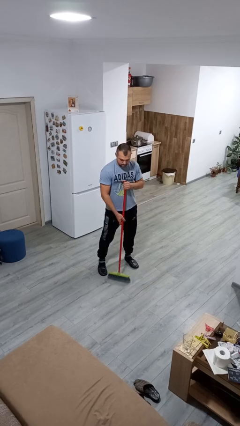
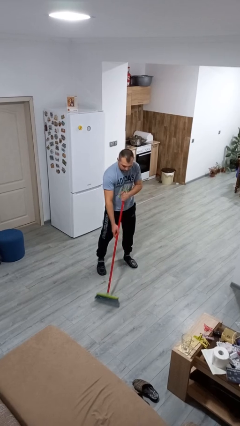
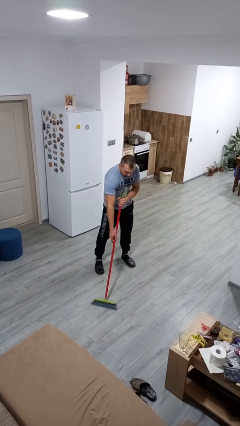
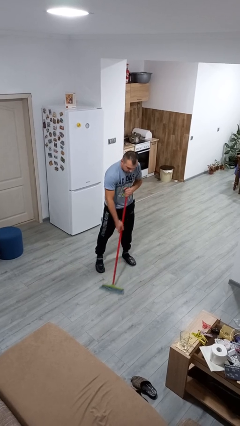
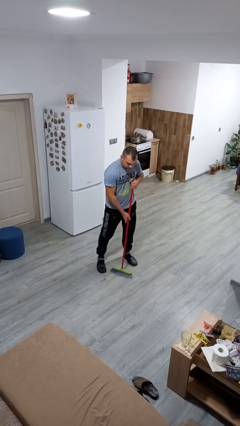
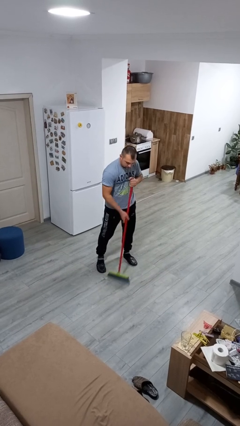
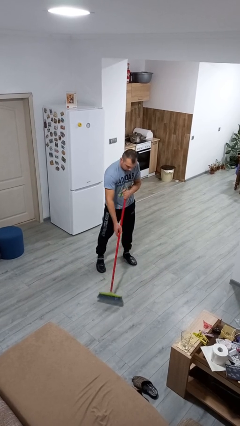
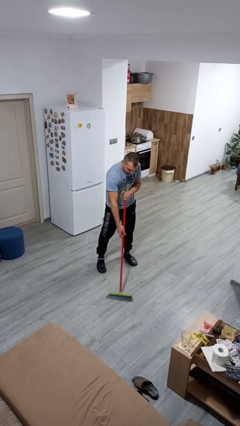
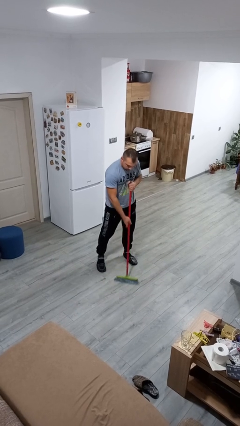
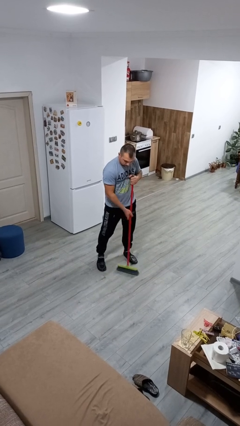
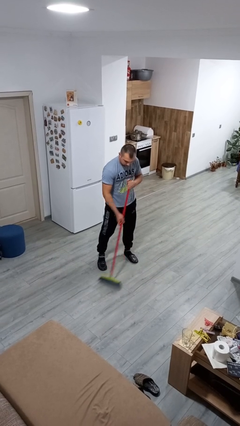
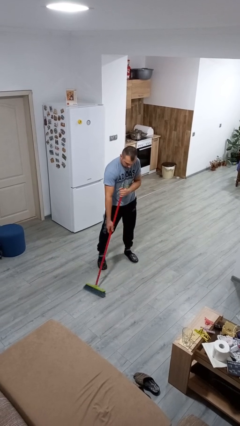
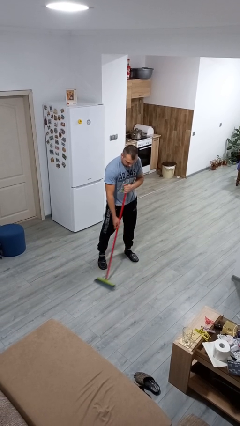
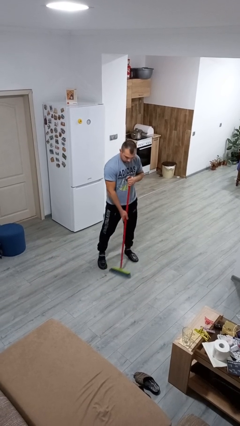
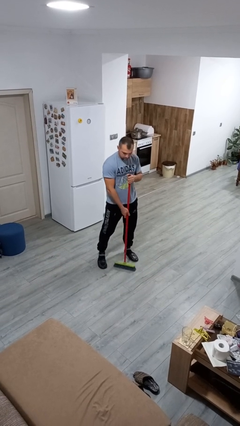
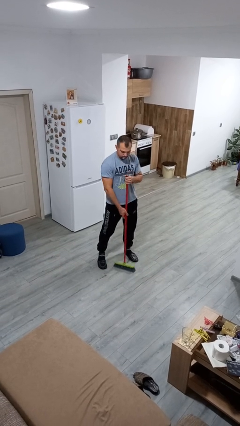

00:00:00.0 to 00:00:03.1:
person sweeps floor

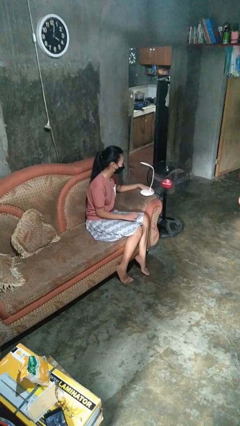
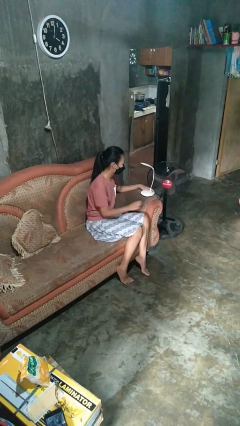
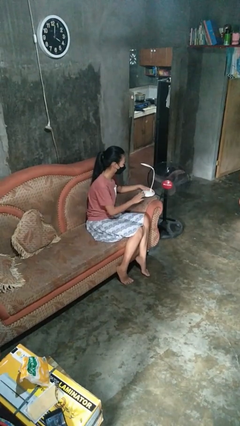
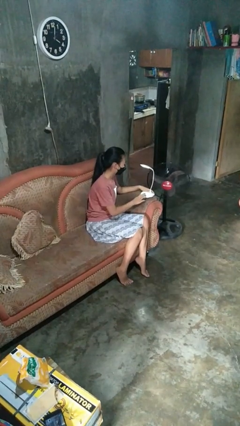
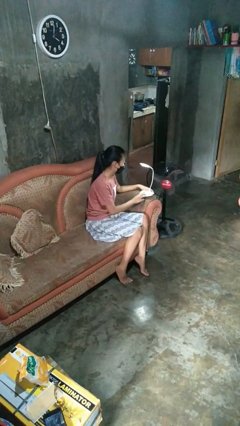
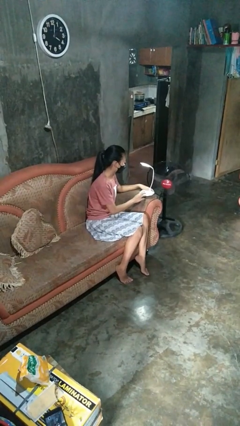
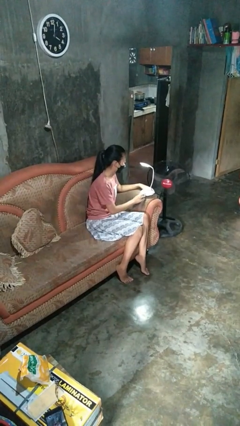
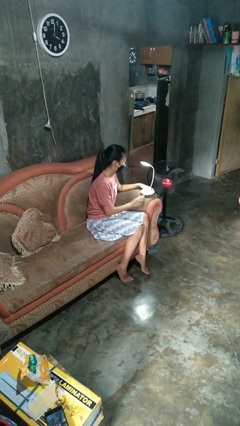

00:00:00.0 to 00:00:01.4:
person turns on lamp

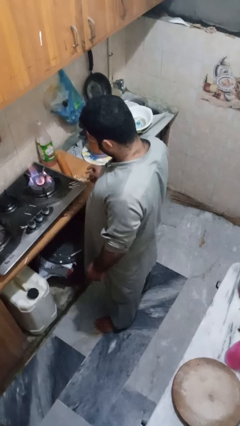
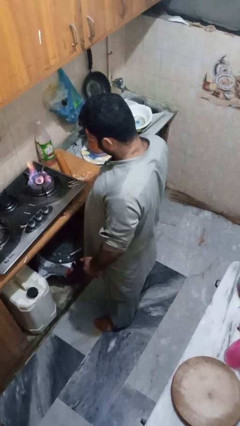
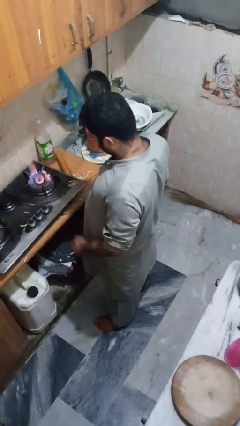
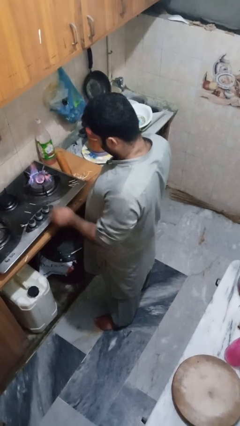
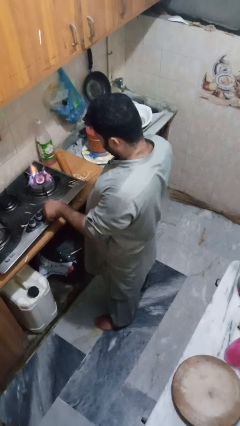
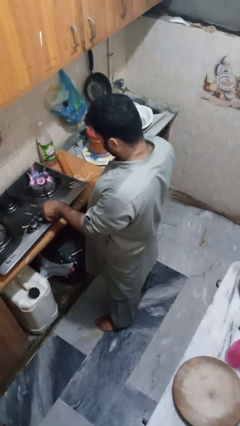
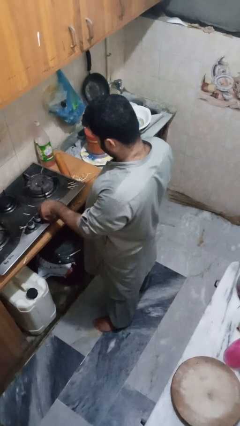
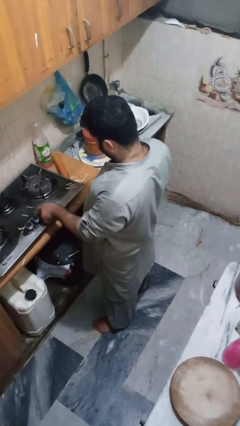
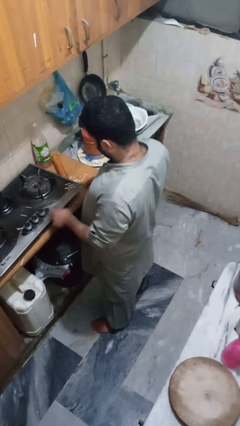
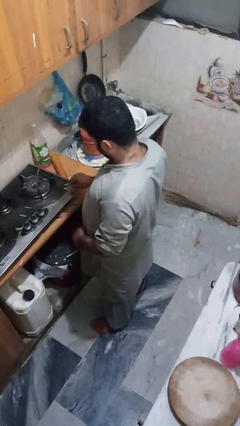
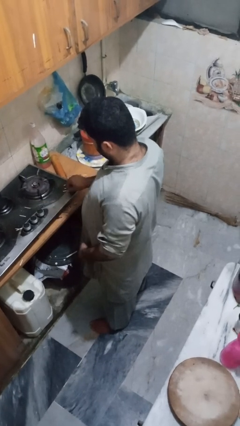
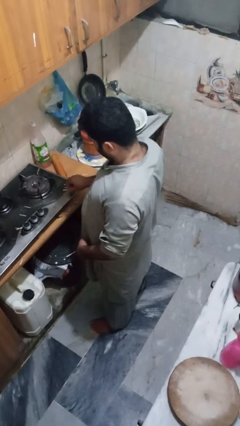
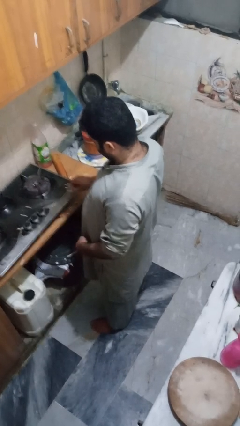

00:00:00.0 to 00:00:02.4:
person turns off stovetop

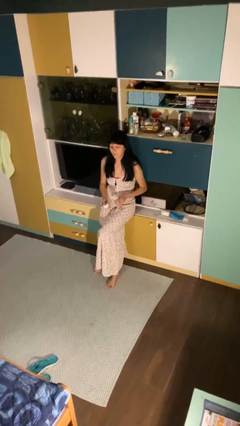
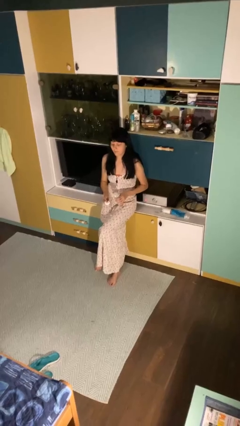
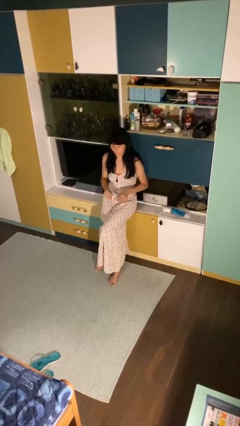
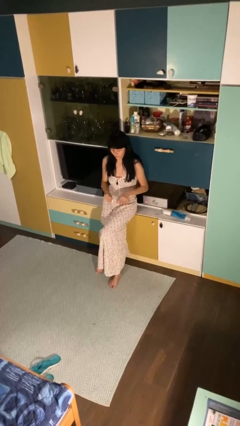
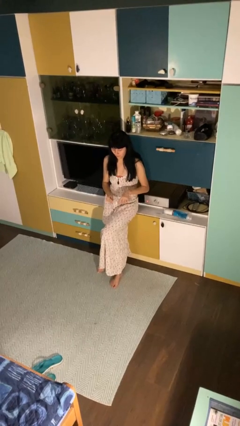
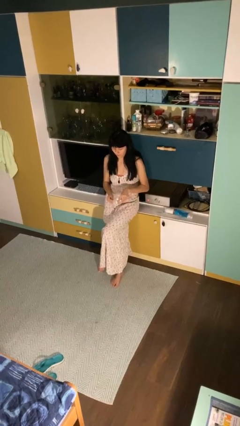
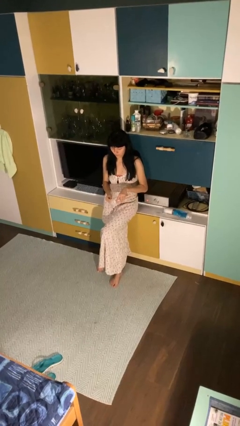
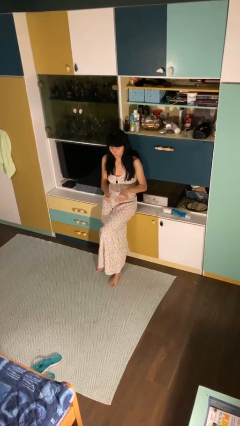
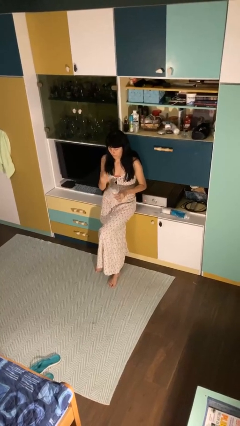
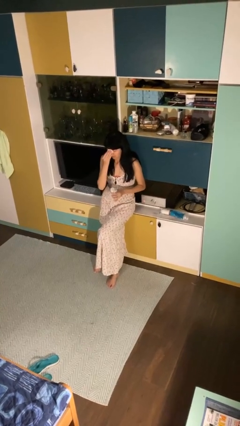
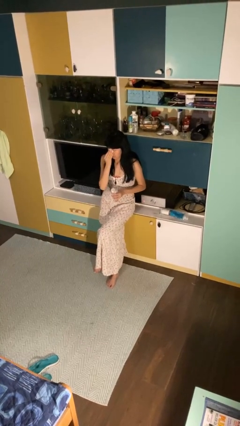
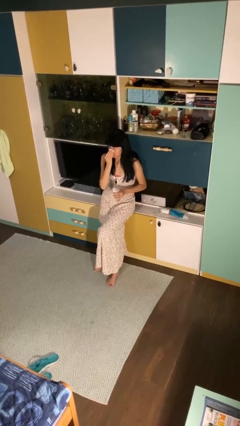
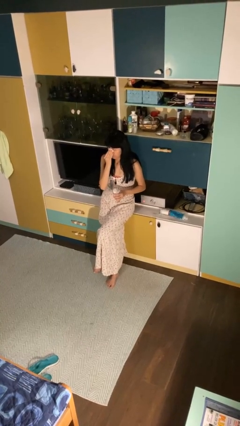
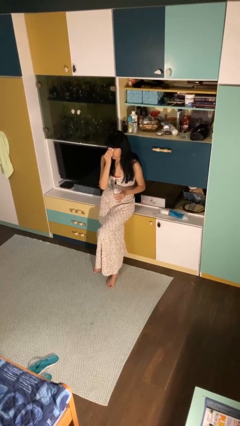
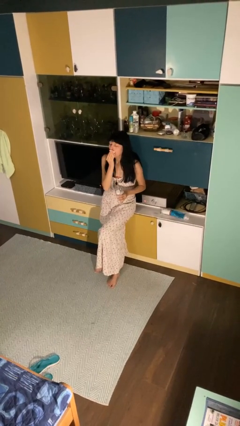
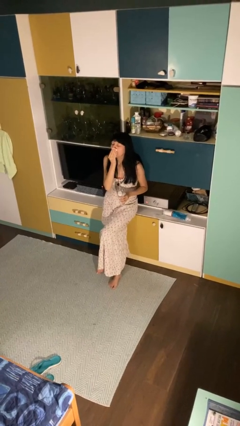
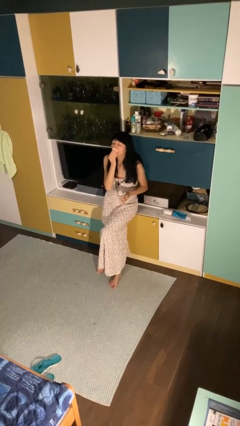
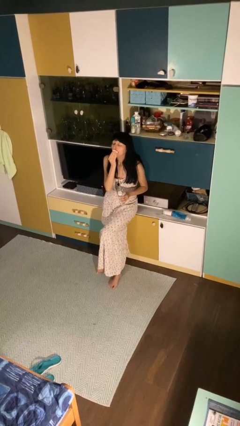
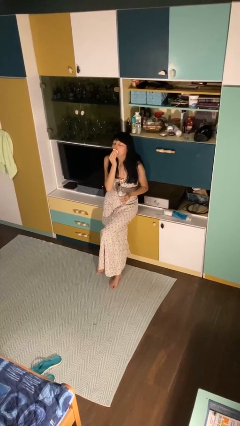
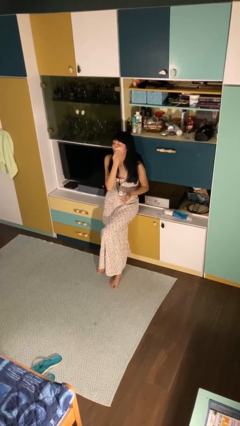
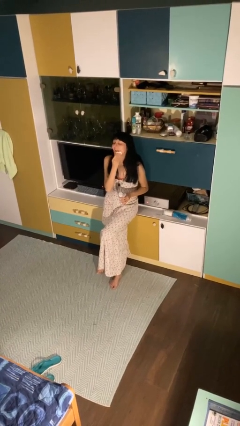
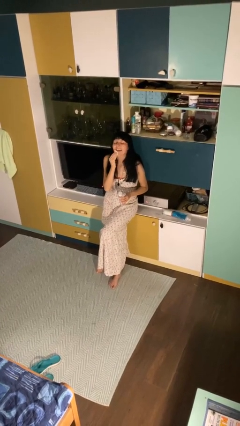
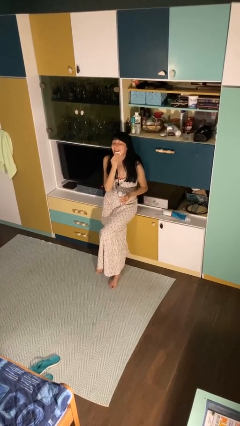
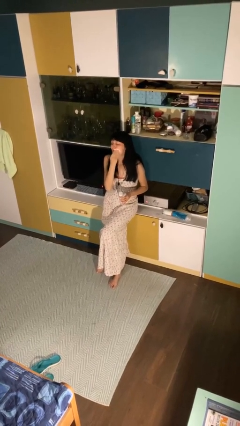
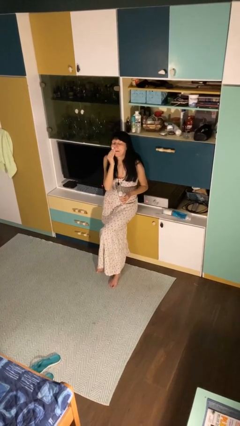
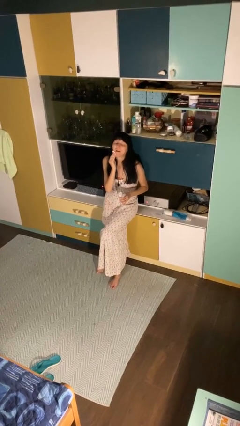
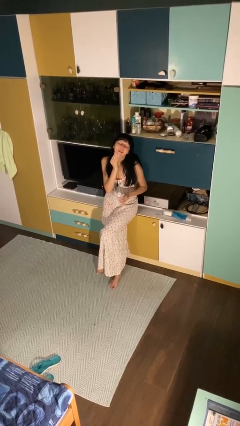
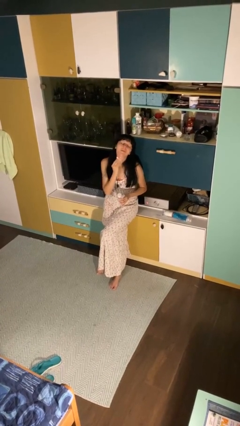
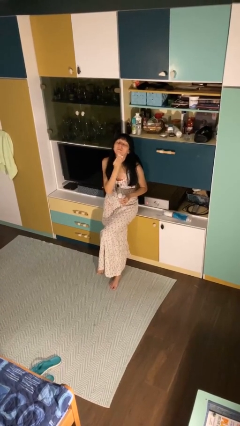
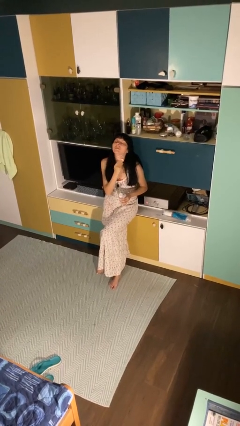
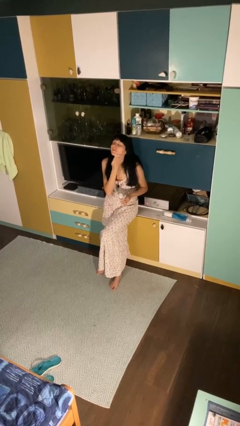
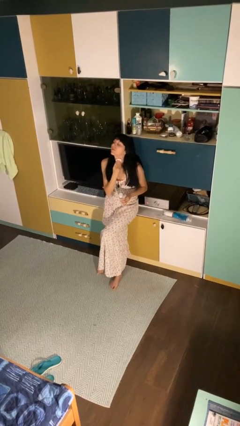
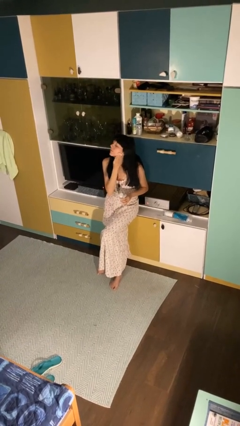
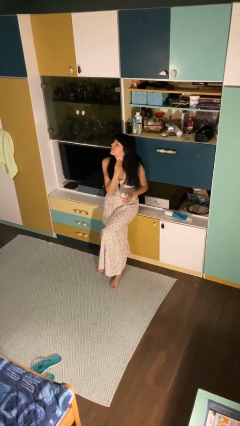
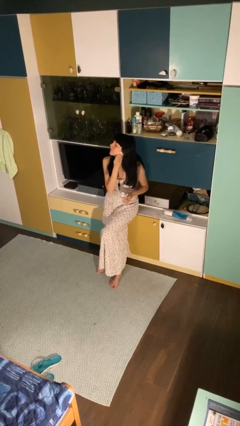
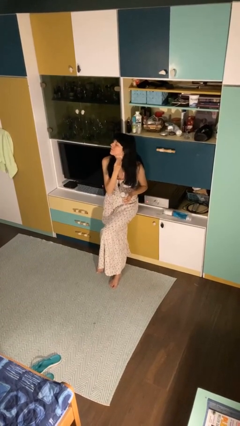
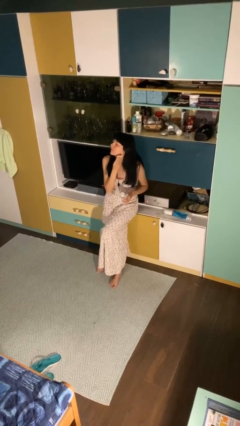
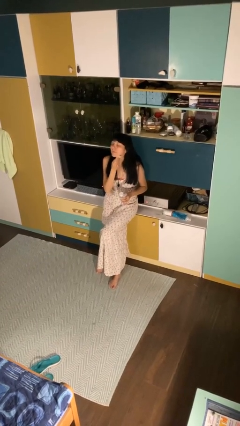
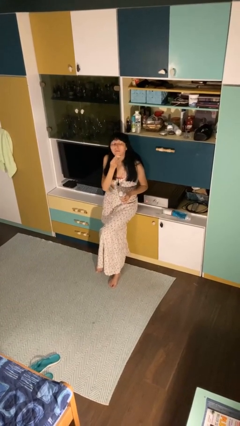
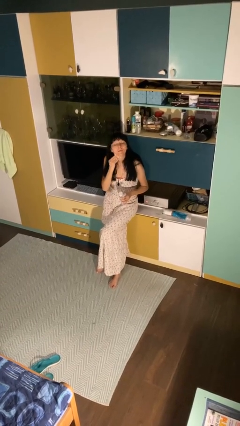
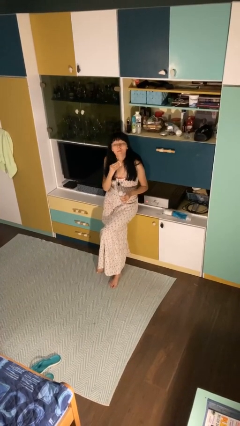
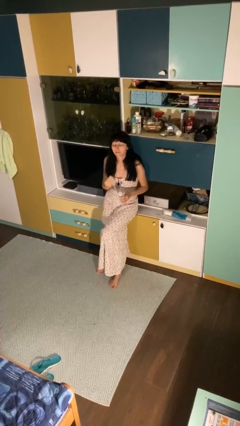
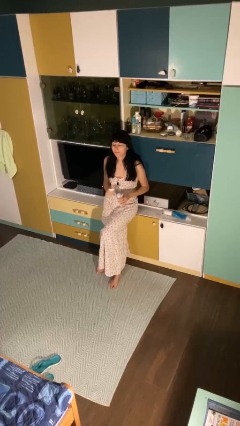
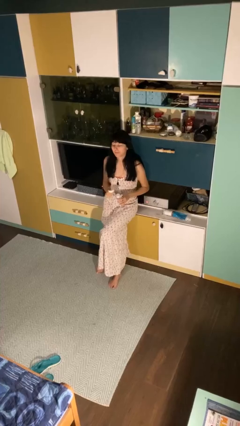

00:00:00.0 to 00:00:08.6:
person applies facial moisturizer

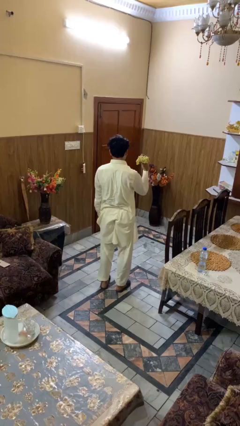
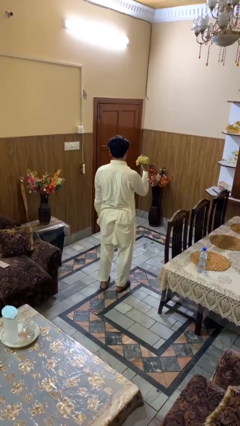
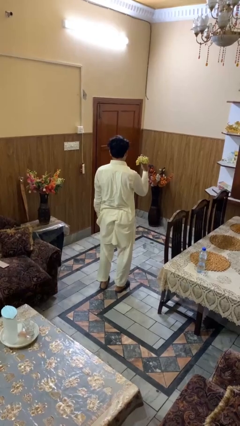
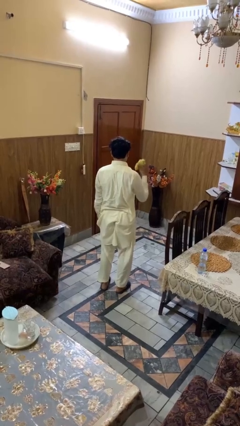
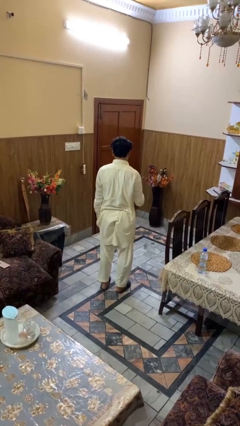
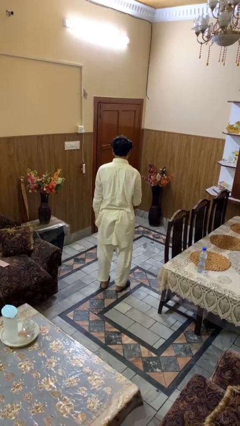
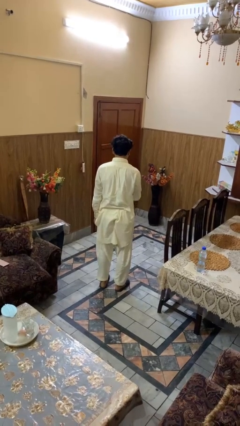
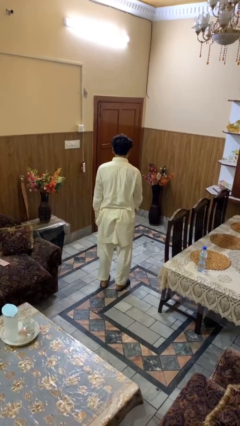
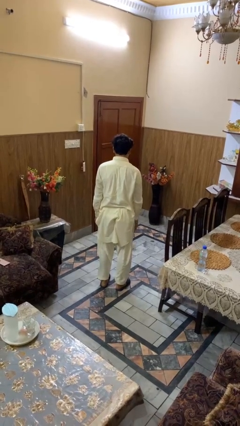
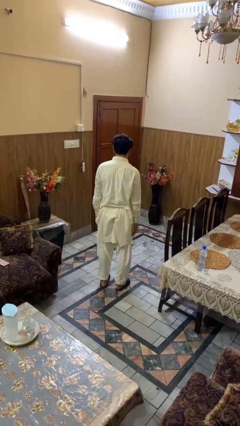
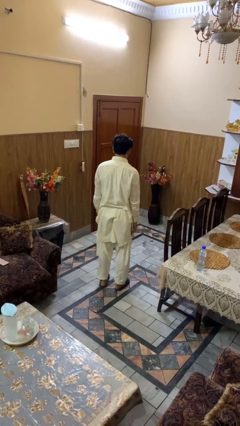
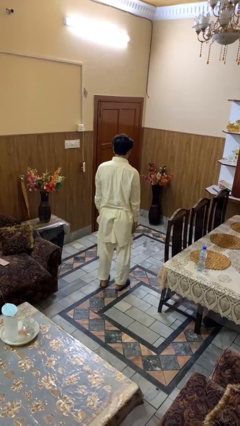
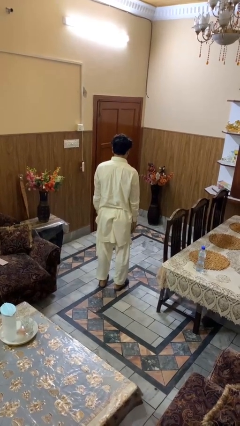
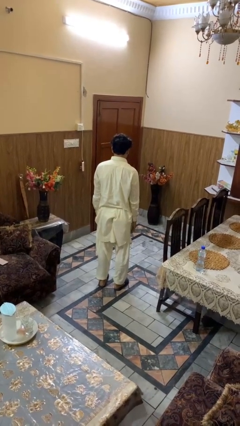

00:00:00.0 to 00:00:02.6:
person throws object to ground
